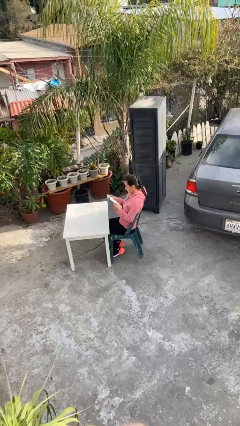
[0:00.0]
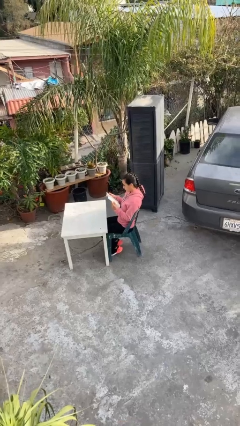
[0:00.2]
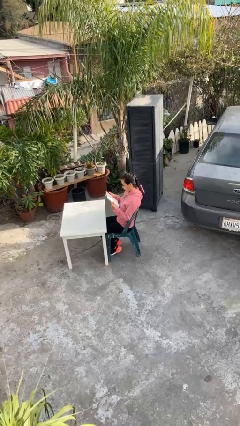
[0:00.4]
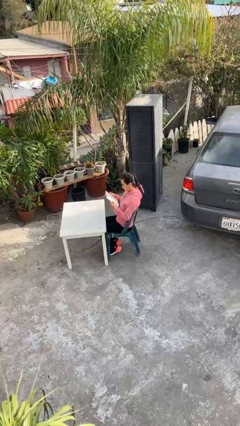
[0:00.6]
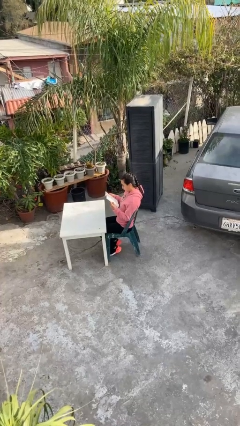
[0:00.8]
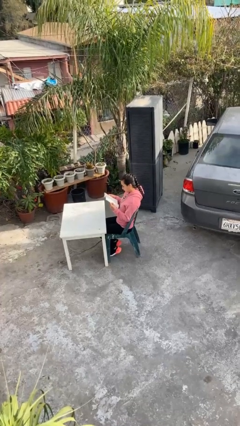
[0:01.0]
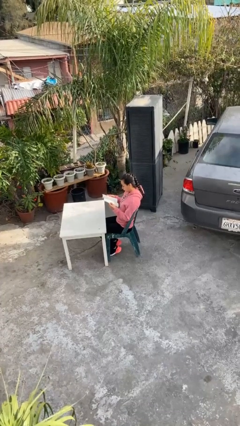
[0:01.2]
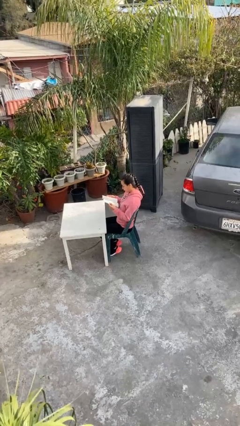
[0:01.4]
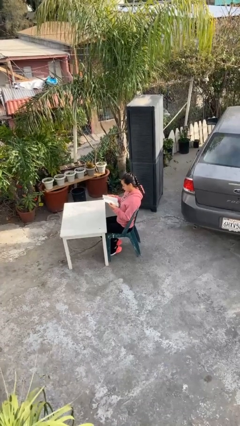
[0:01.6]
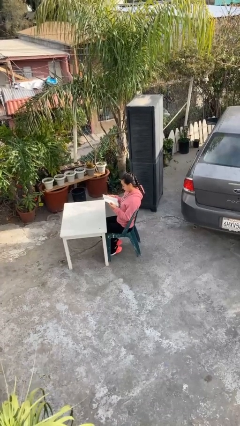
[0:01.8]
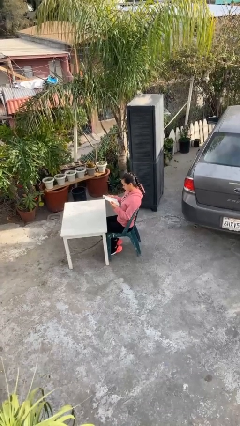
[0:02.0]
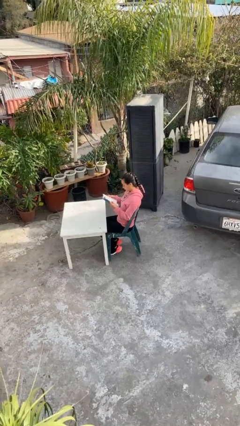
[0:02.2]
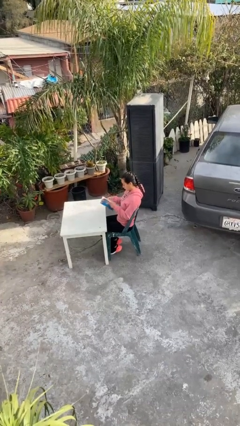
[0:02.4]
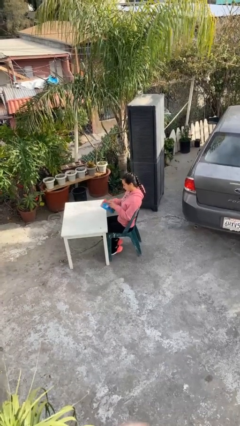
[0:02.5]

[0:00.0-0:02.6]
person reads document

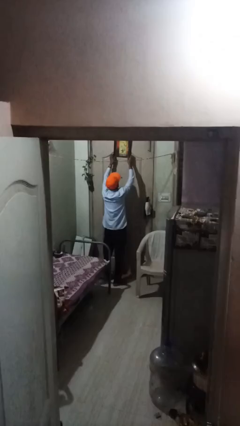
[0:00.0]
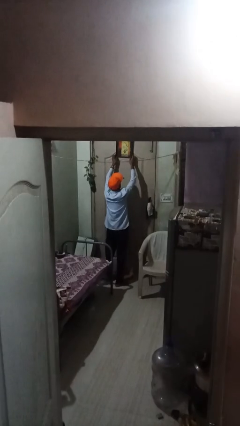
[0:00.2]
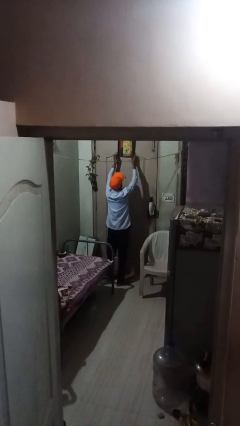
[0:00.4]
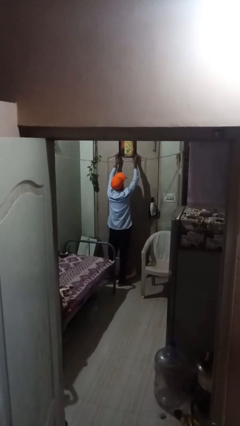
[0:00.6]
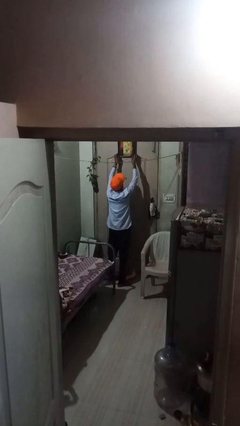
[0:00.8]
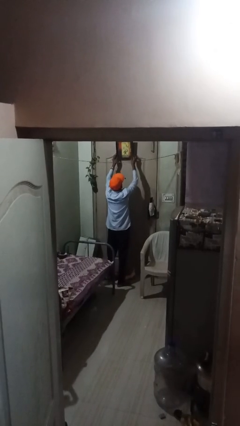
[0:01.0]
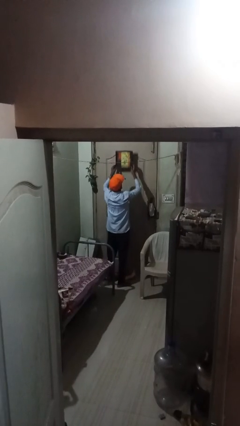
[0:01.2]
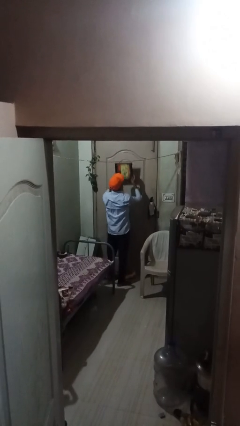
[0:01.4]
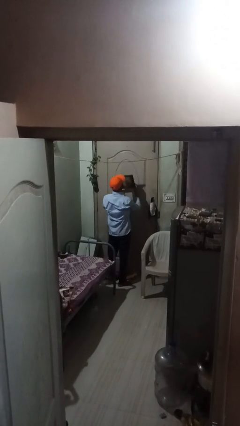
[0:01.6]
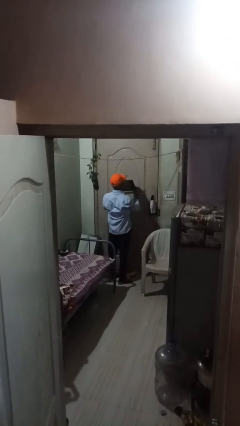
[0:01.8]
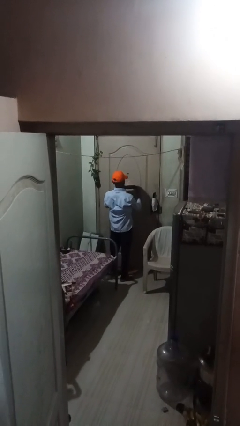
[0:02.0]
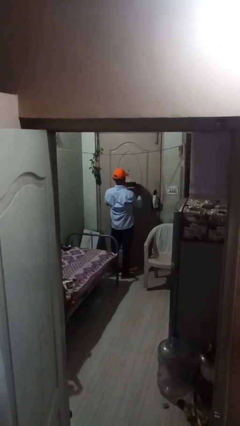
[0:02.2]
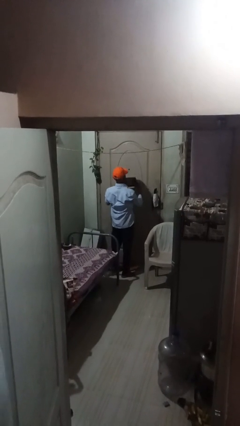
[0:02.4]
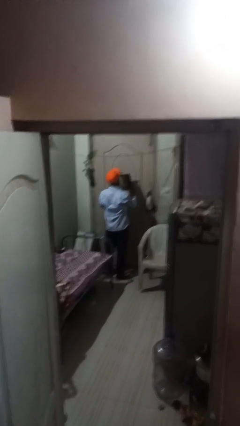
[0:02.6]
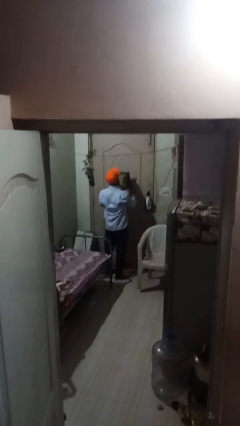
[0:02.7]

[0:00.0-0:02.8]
person takes down picture frame

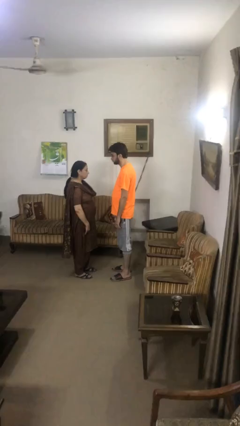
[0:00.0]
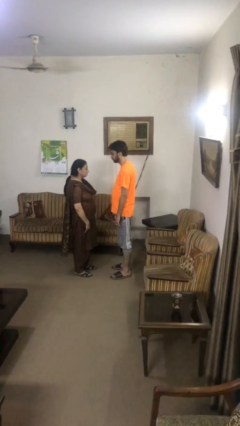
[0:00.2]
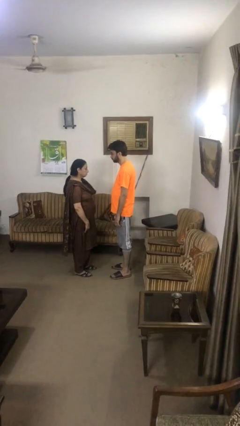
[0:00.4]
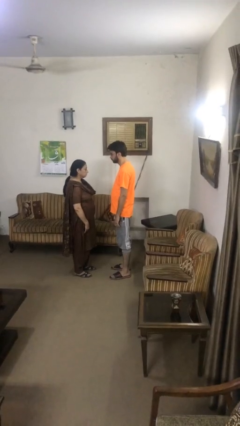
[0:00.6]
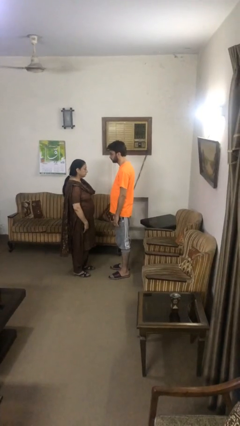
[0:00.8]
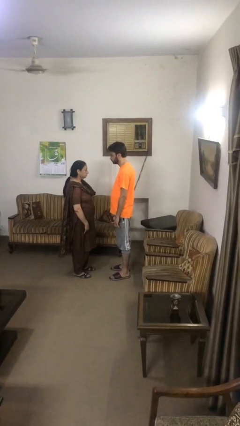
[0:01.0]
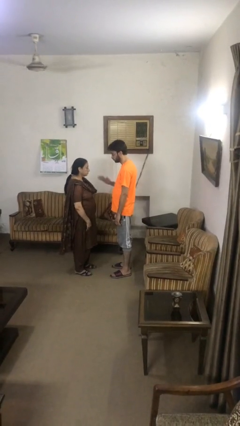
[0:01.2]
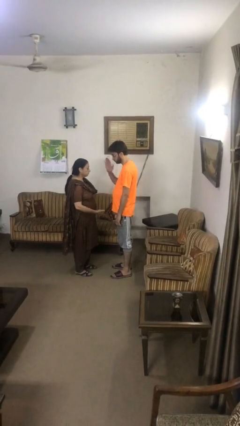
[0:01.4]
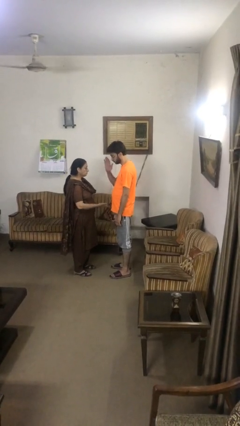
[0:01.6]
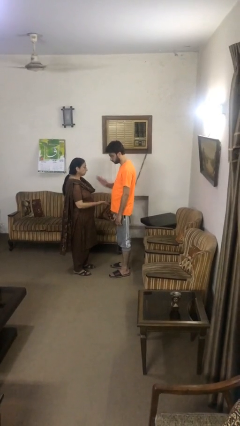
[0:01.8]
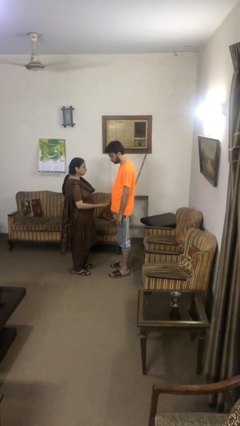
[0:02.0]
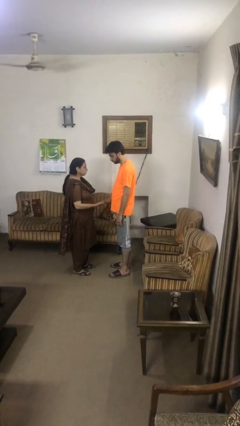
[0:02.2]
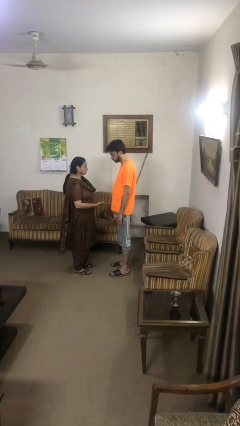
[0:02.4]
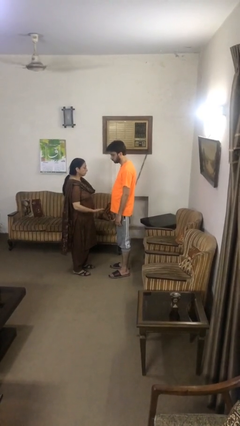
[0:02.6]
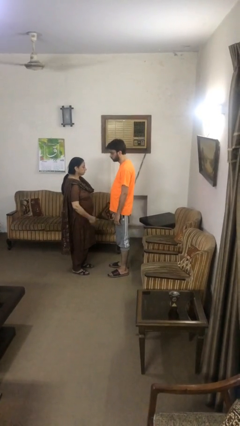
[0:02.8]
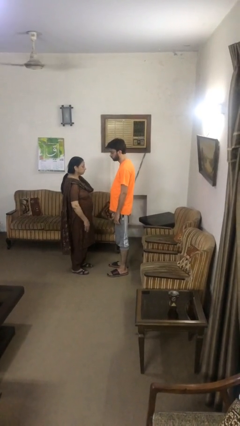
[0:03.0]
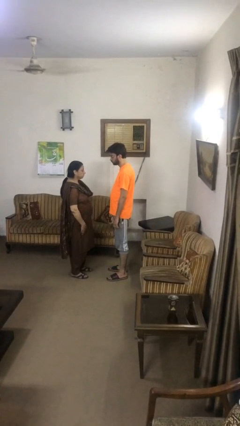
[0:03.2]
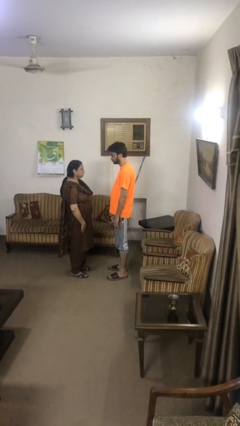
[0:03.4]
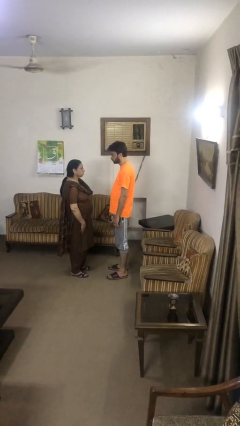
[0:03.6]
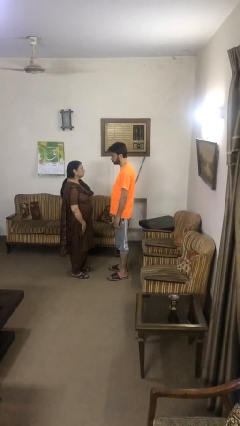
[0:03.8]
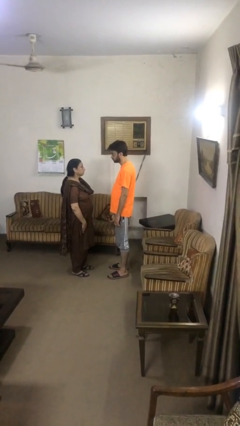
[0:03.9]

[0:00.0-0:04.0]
person highfives hand

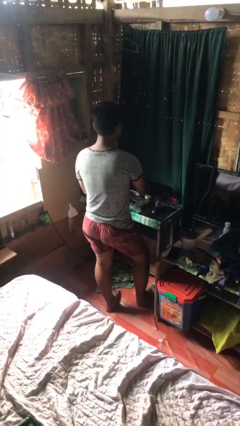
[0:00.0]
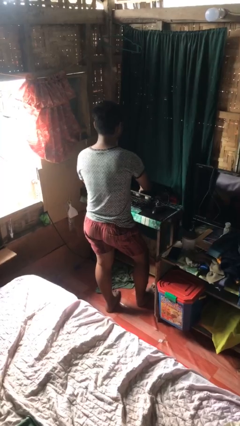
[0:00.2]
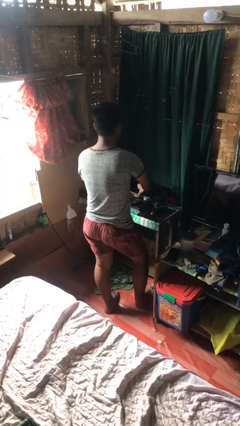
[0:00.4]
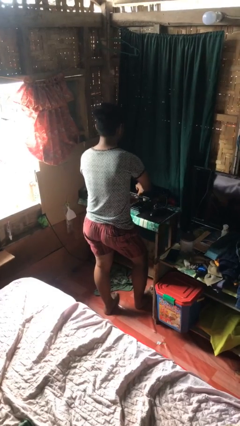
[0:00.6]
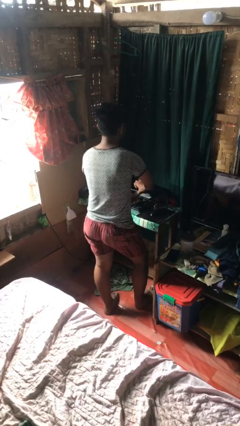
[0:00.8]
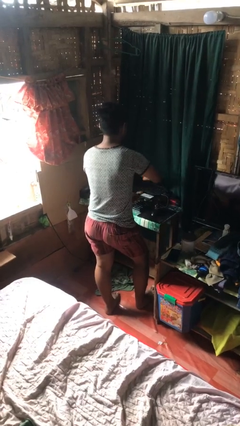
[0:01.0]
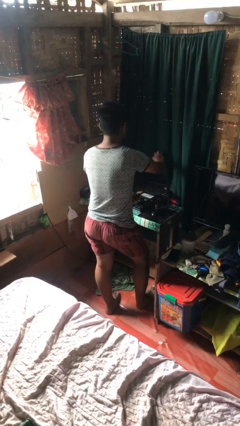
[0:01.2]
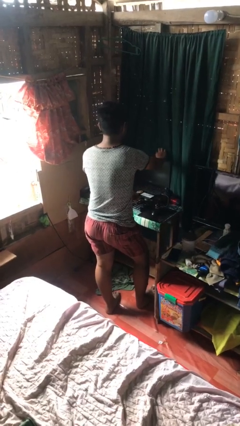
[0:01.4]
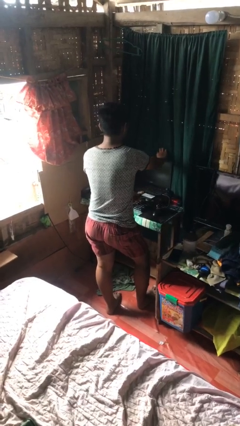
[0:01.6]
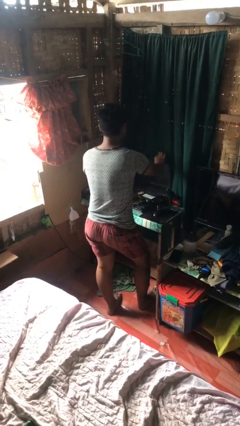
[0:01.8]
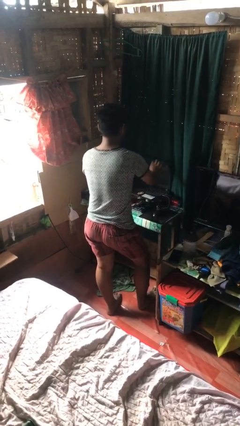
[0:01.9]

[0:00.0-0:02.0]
person opens laptop

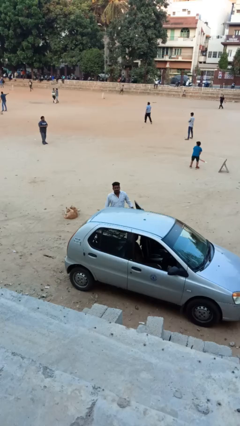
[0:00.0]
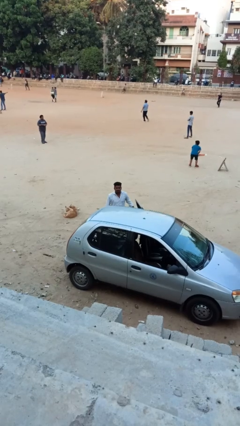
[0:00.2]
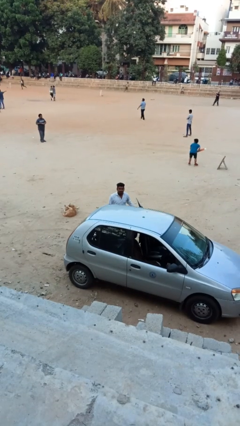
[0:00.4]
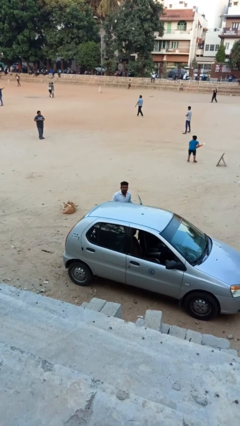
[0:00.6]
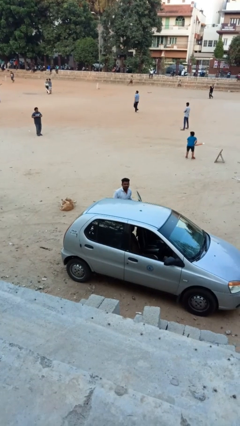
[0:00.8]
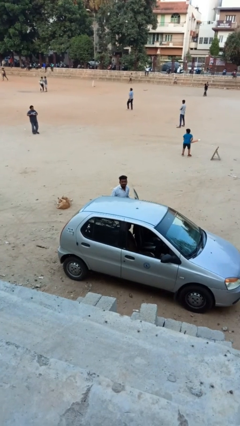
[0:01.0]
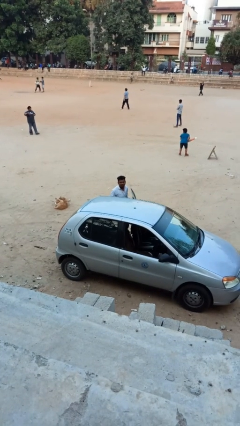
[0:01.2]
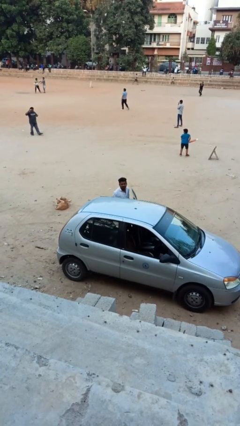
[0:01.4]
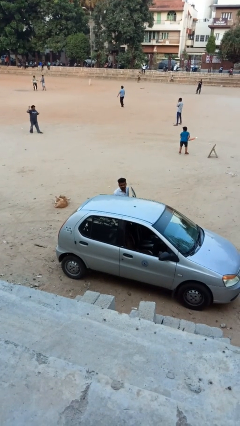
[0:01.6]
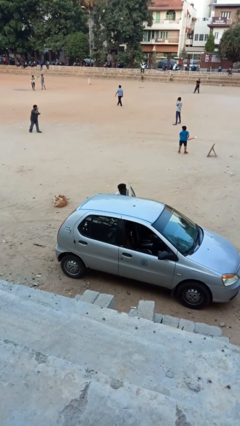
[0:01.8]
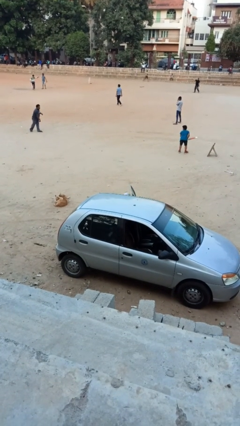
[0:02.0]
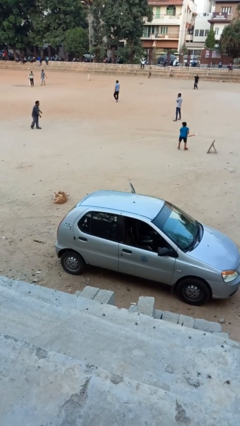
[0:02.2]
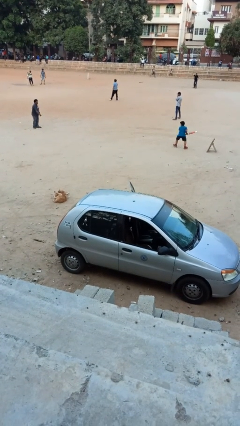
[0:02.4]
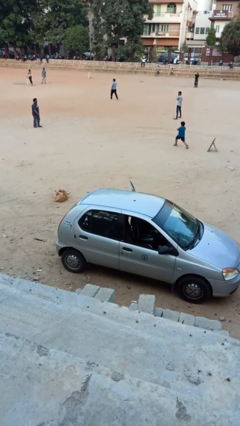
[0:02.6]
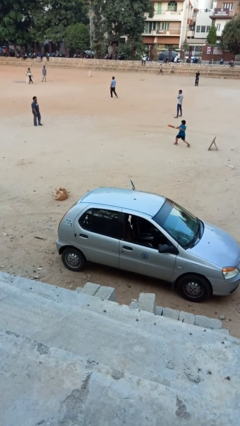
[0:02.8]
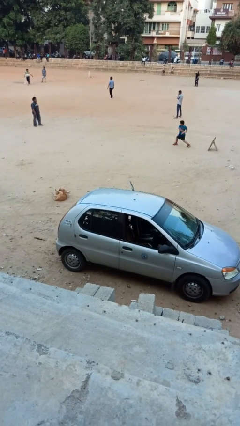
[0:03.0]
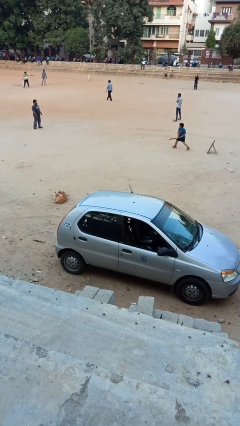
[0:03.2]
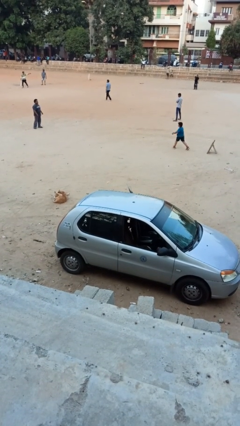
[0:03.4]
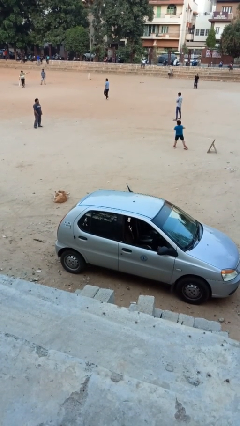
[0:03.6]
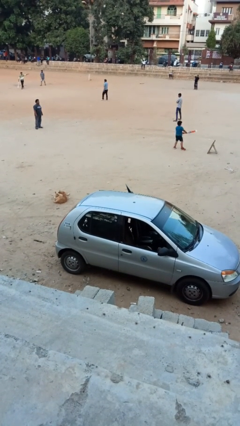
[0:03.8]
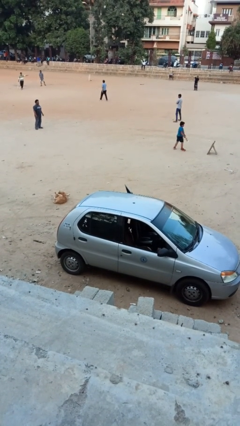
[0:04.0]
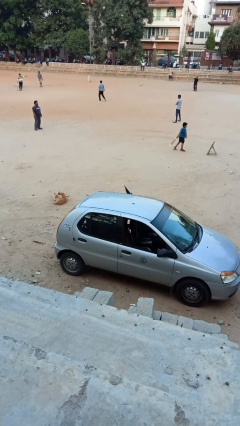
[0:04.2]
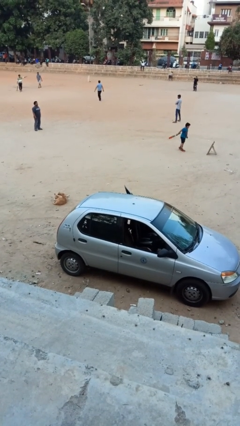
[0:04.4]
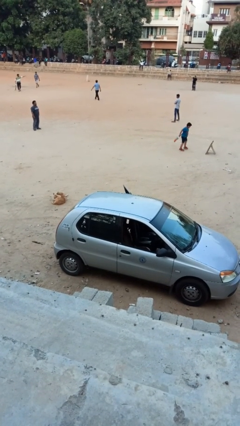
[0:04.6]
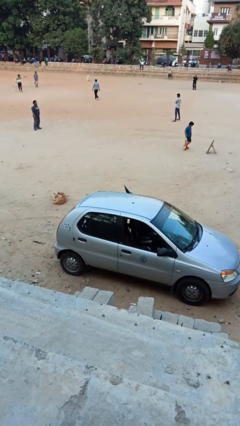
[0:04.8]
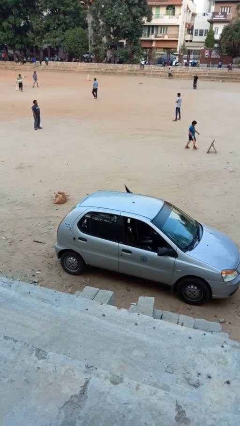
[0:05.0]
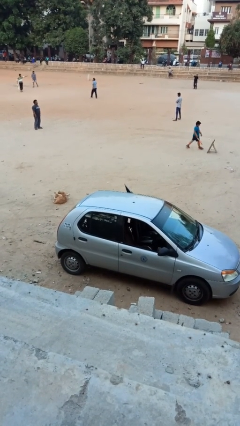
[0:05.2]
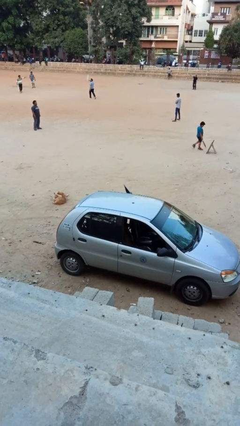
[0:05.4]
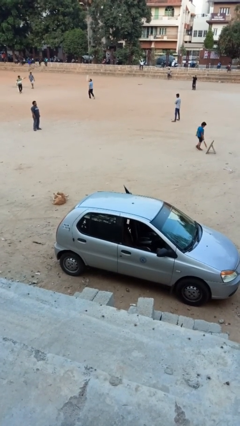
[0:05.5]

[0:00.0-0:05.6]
person enters car

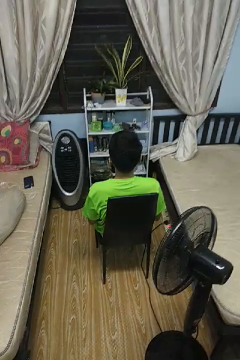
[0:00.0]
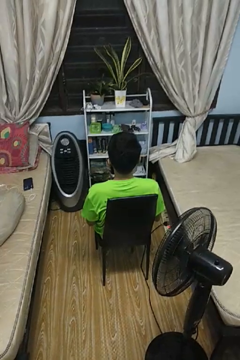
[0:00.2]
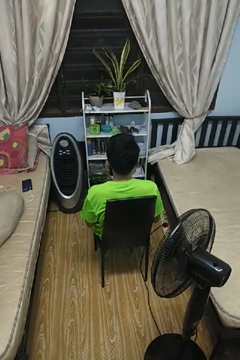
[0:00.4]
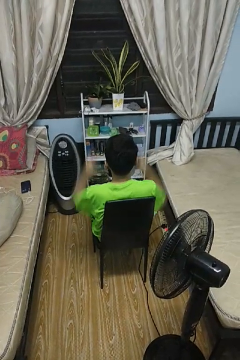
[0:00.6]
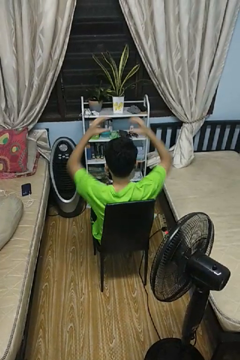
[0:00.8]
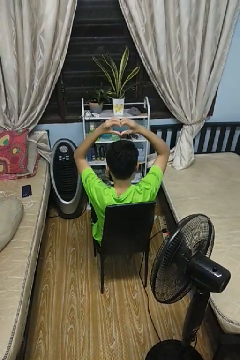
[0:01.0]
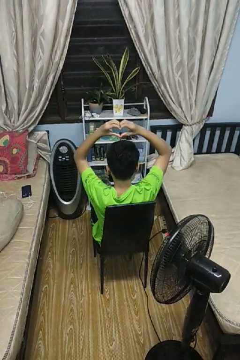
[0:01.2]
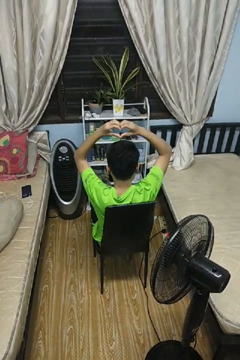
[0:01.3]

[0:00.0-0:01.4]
person gestures heart
